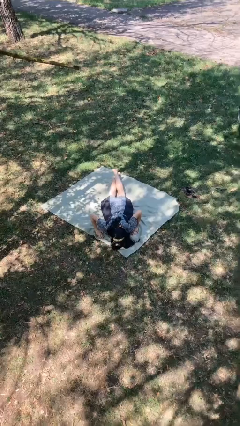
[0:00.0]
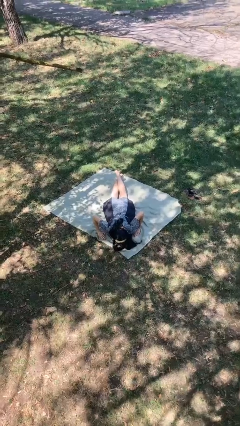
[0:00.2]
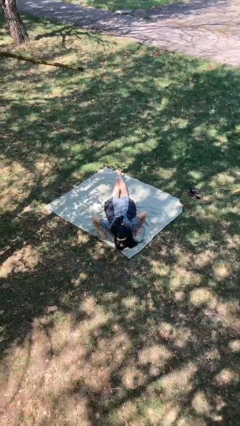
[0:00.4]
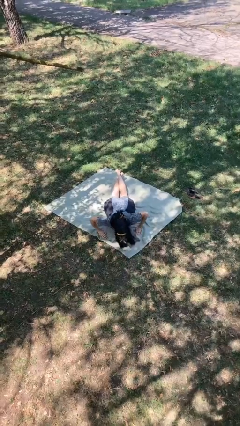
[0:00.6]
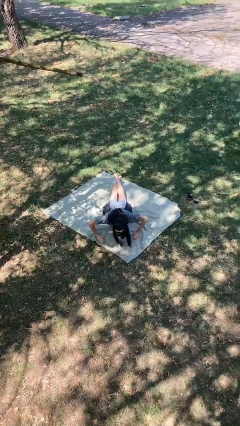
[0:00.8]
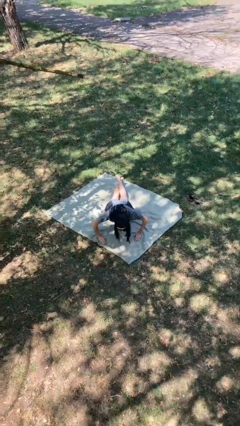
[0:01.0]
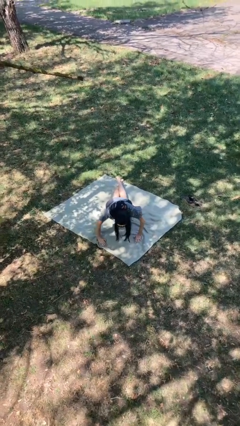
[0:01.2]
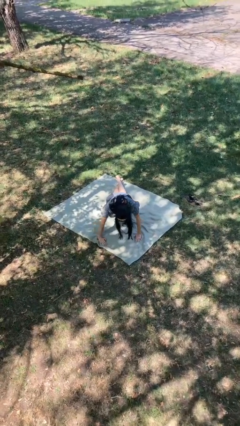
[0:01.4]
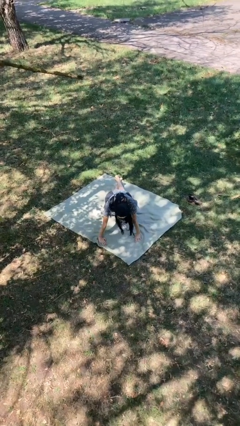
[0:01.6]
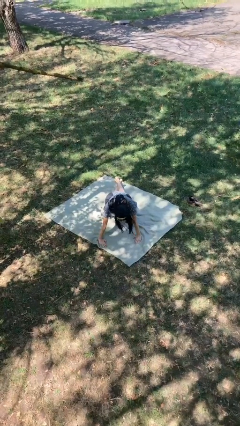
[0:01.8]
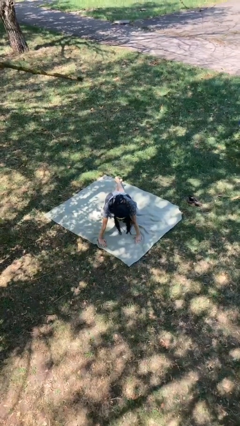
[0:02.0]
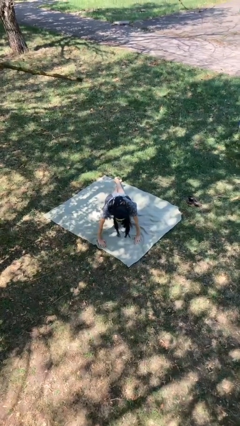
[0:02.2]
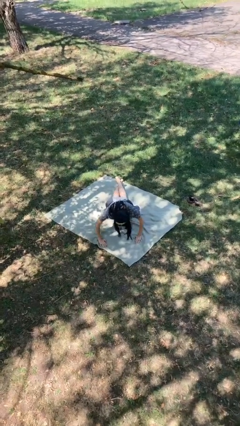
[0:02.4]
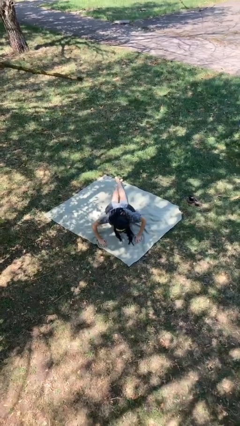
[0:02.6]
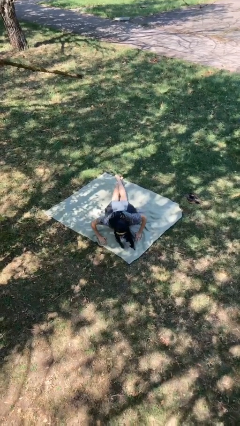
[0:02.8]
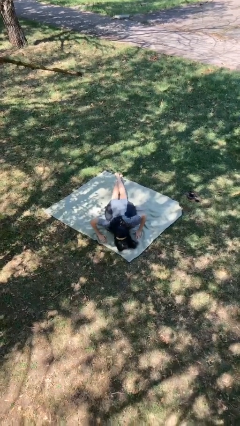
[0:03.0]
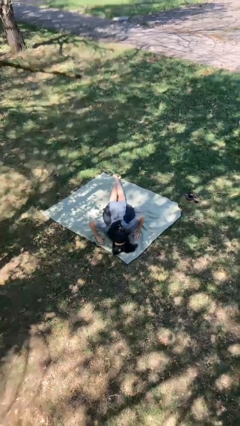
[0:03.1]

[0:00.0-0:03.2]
person exercises with pushup

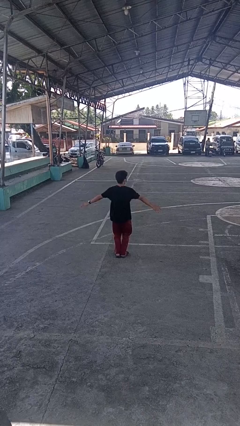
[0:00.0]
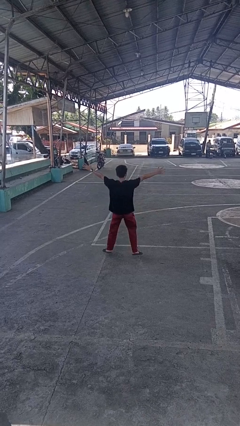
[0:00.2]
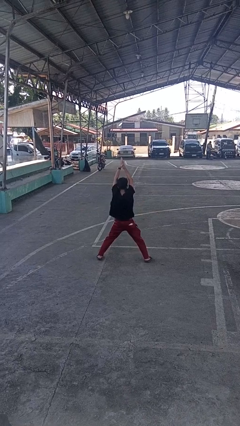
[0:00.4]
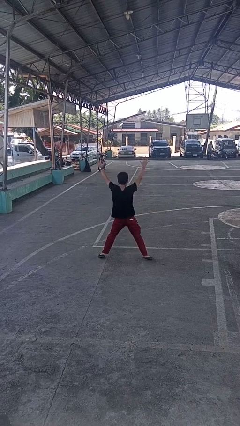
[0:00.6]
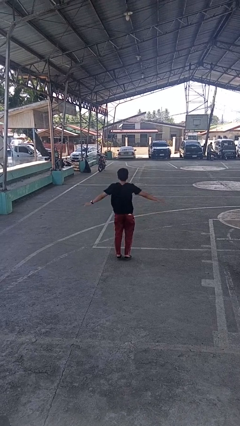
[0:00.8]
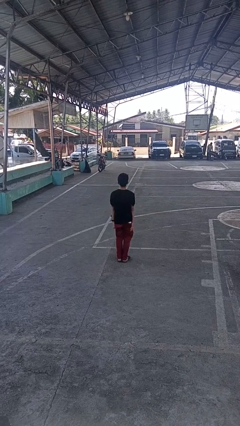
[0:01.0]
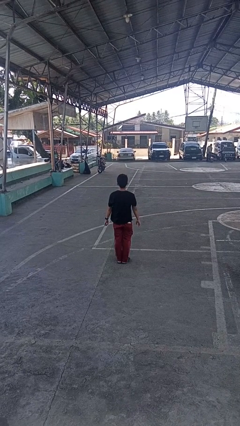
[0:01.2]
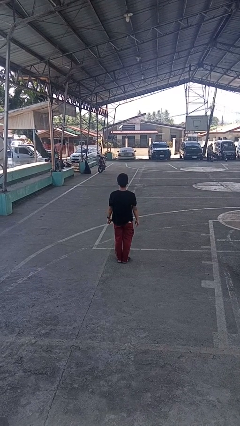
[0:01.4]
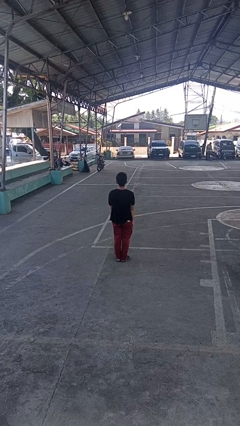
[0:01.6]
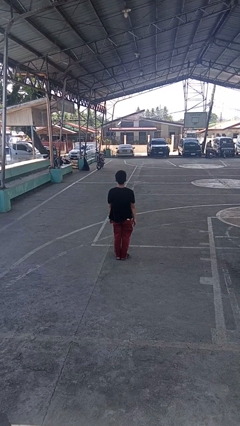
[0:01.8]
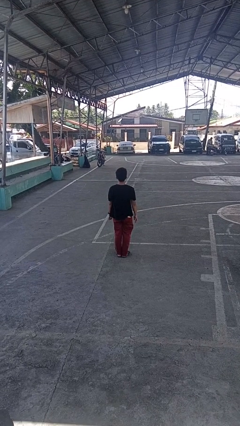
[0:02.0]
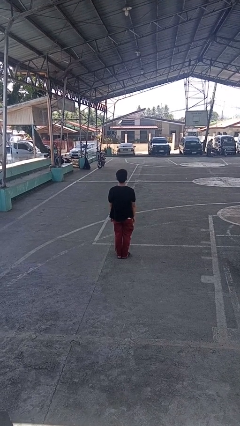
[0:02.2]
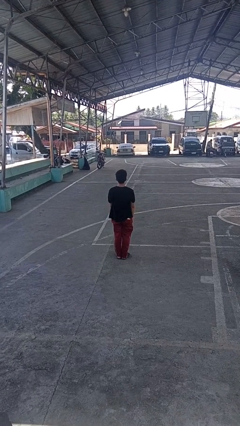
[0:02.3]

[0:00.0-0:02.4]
person exercises with jumping jacks

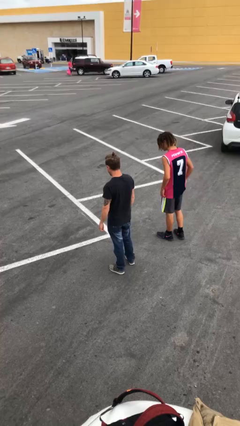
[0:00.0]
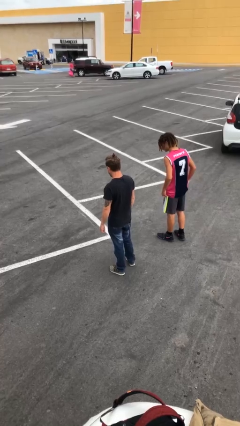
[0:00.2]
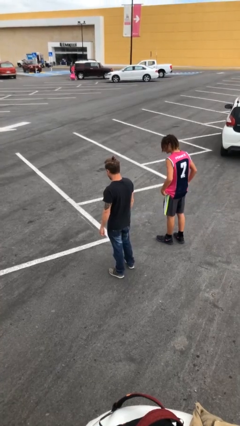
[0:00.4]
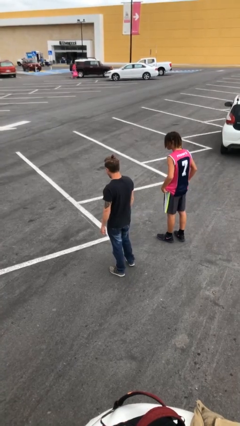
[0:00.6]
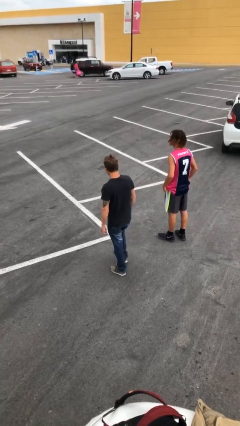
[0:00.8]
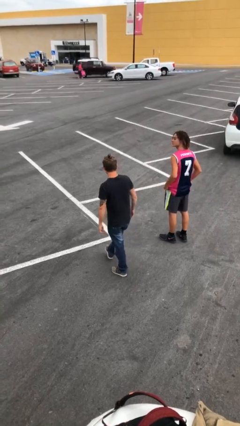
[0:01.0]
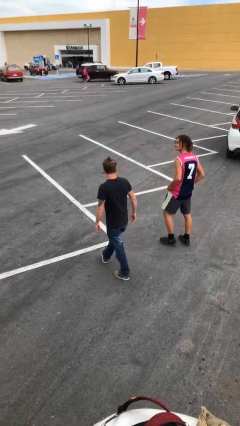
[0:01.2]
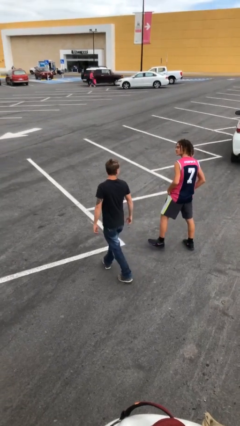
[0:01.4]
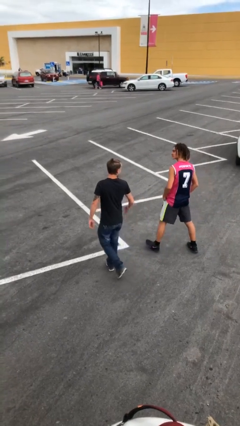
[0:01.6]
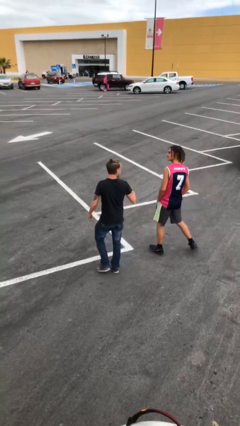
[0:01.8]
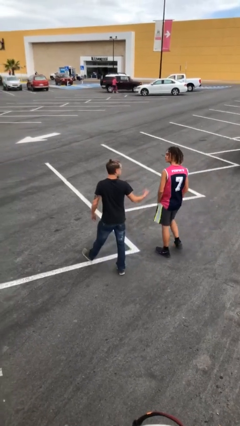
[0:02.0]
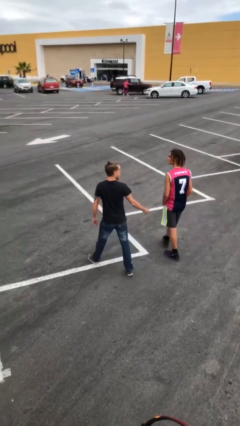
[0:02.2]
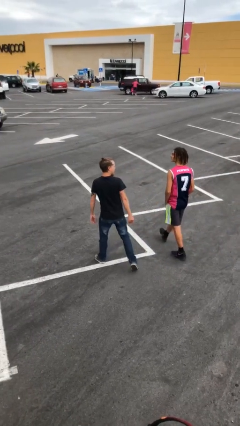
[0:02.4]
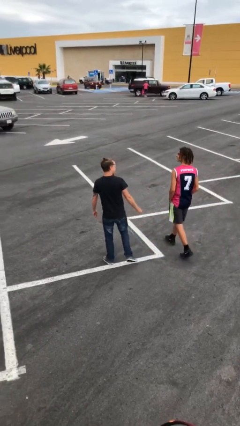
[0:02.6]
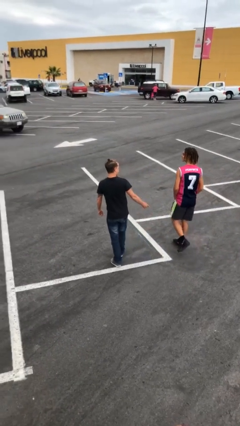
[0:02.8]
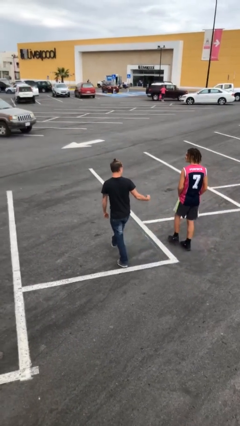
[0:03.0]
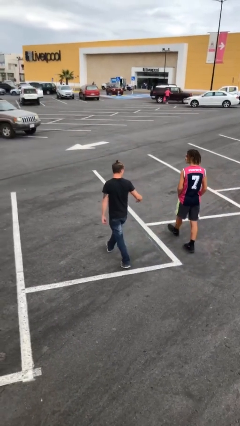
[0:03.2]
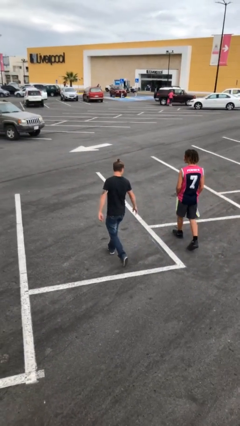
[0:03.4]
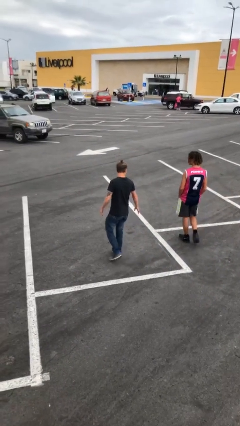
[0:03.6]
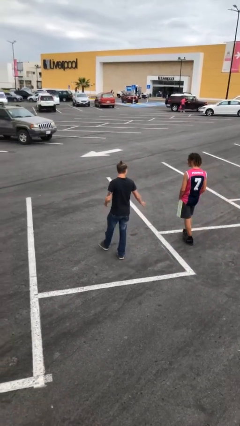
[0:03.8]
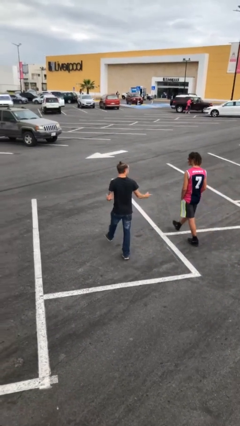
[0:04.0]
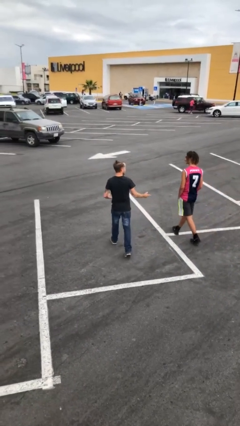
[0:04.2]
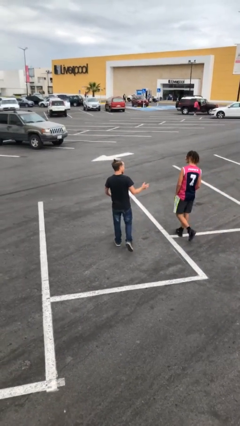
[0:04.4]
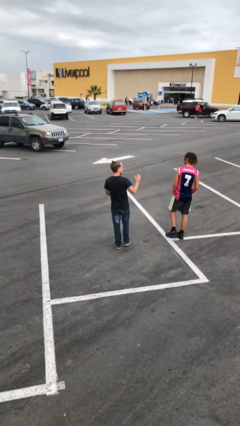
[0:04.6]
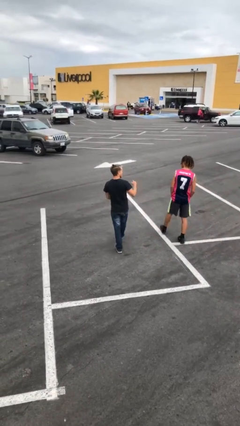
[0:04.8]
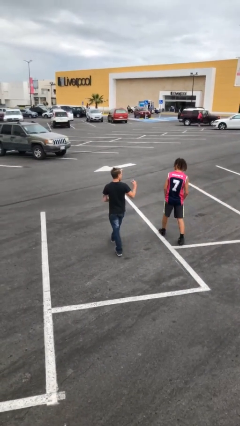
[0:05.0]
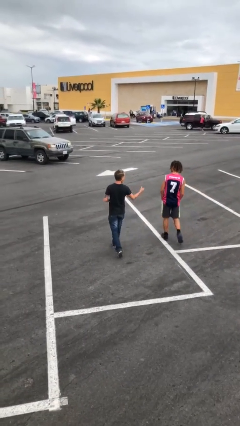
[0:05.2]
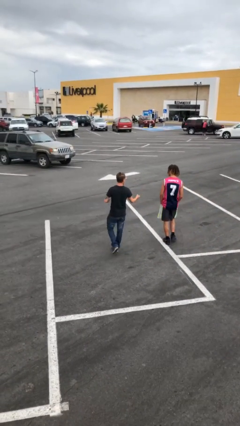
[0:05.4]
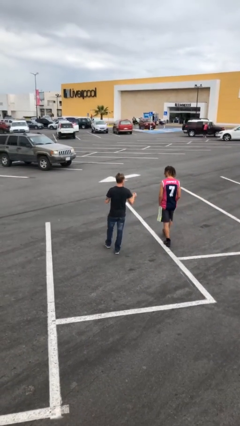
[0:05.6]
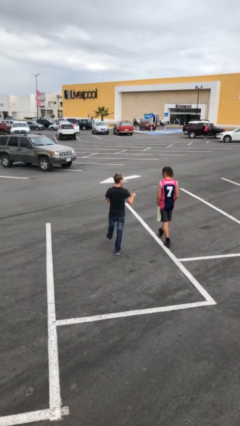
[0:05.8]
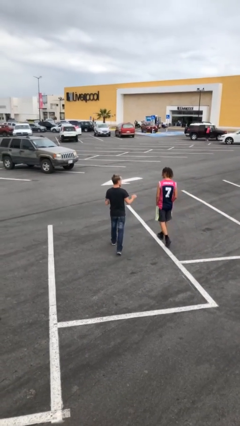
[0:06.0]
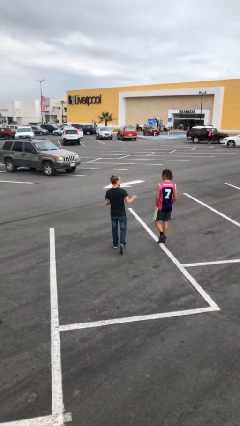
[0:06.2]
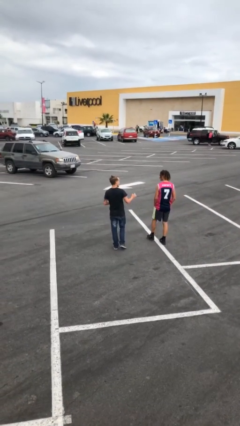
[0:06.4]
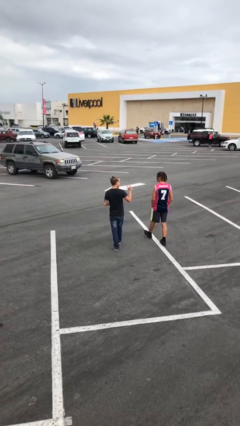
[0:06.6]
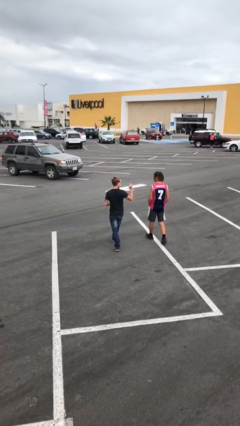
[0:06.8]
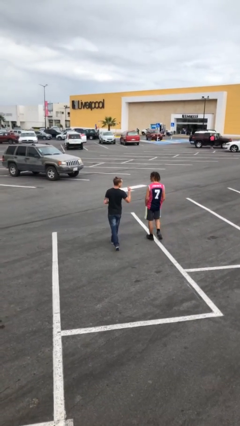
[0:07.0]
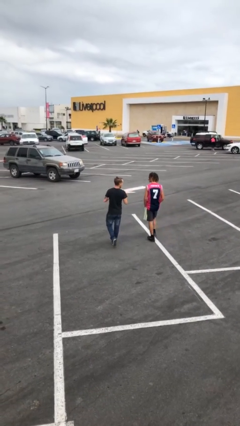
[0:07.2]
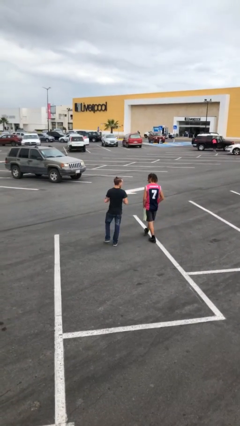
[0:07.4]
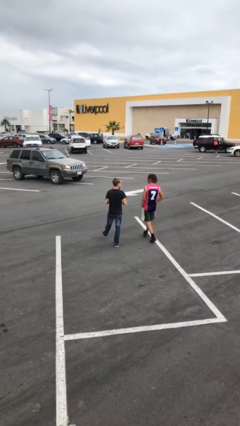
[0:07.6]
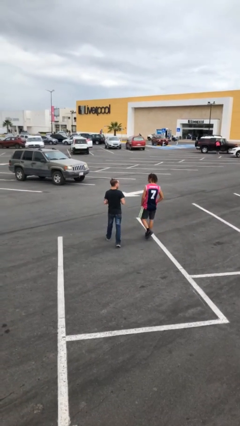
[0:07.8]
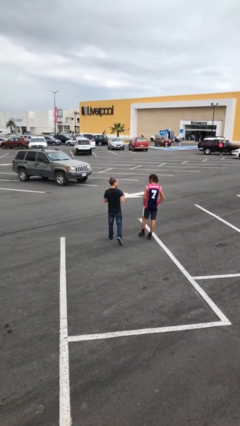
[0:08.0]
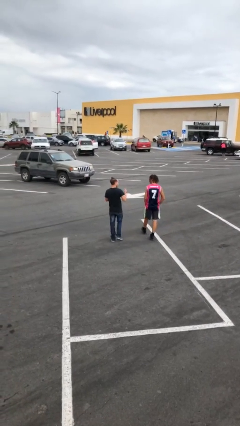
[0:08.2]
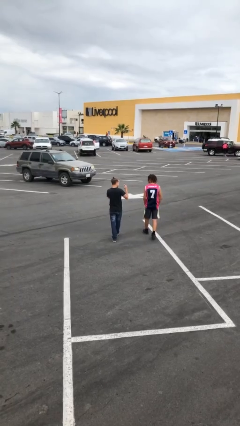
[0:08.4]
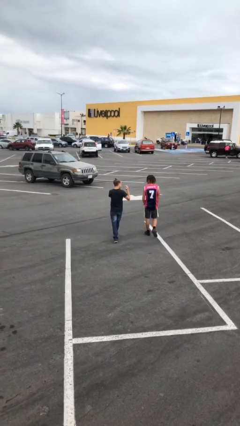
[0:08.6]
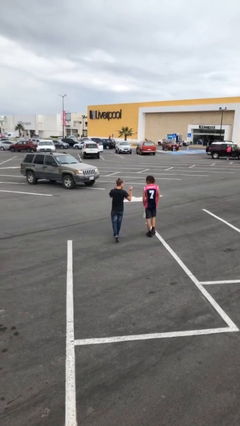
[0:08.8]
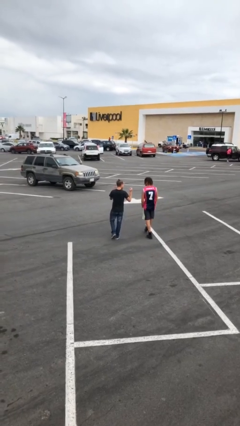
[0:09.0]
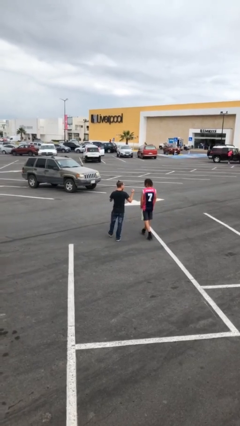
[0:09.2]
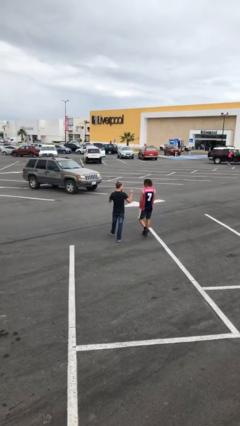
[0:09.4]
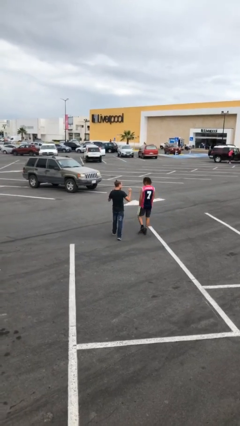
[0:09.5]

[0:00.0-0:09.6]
person talks to person

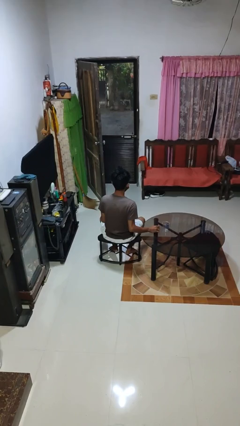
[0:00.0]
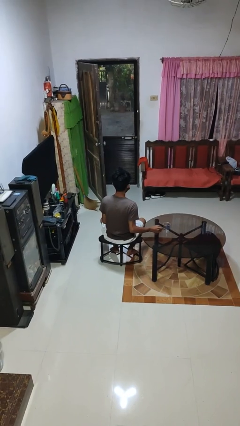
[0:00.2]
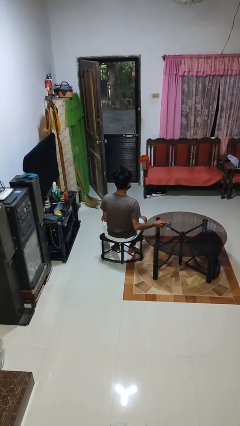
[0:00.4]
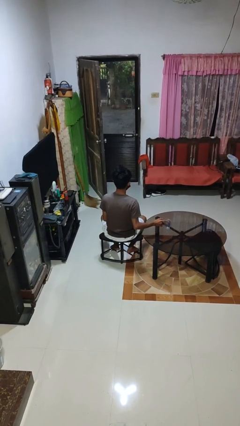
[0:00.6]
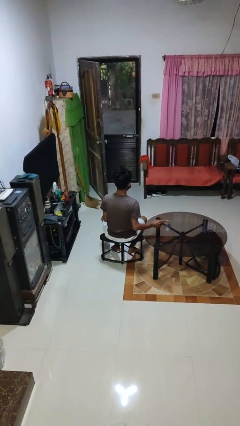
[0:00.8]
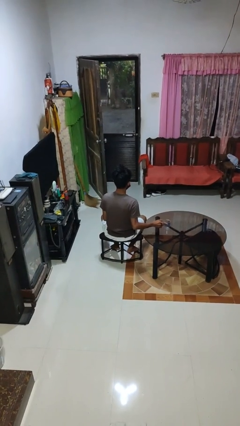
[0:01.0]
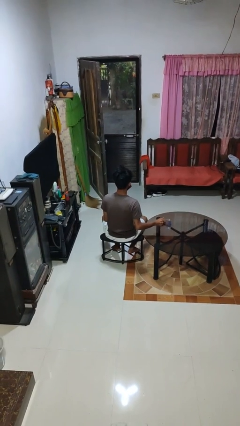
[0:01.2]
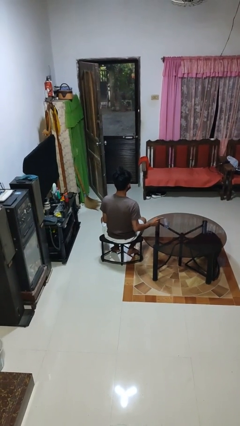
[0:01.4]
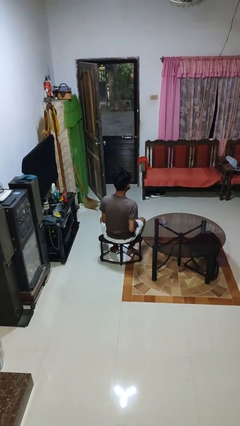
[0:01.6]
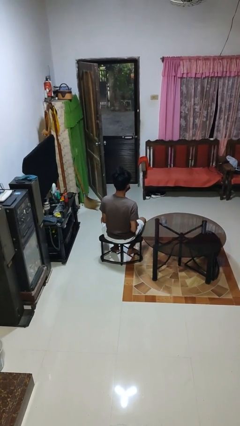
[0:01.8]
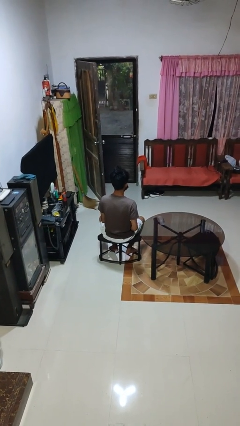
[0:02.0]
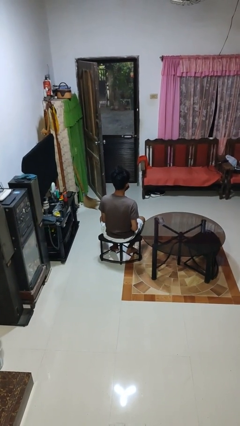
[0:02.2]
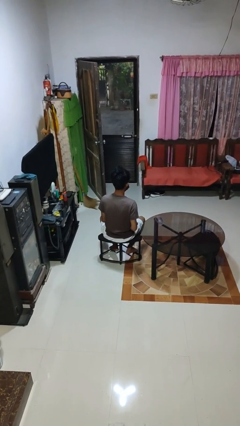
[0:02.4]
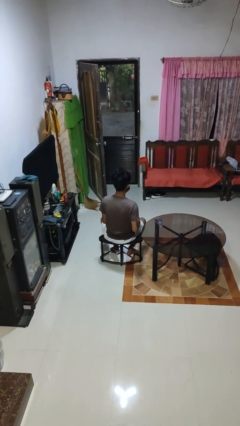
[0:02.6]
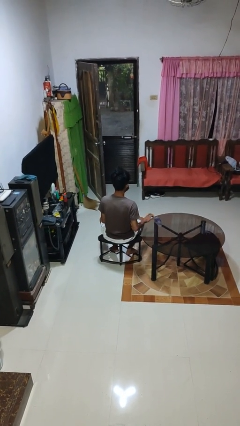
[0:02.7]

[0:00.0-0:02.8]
person knocks over glass
